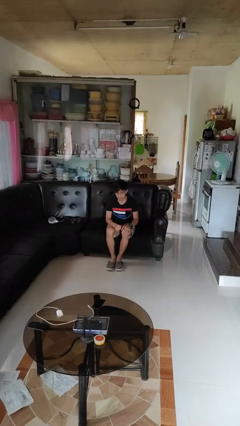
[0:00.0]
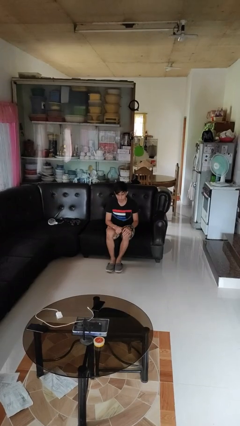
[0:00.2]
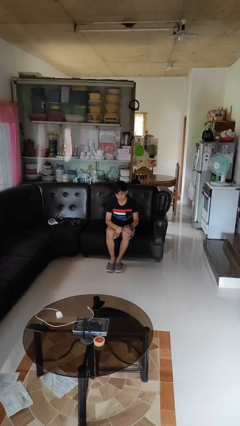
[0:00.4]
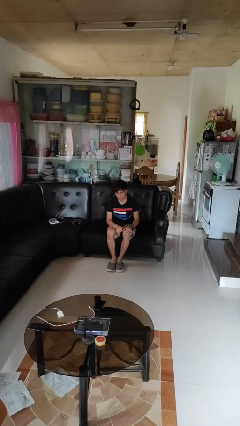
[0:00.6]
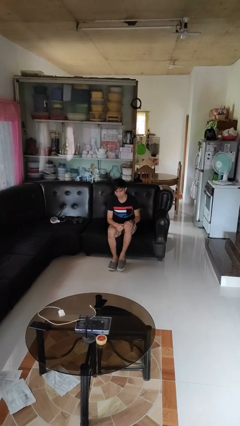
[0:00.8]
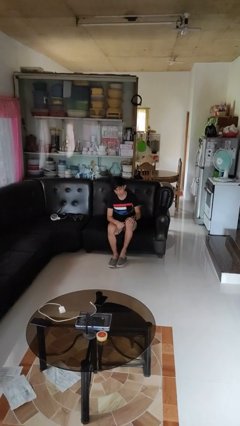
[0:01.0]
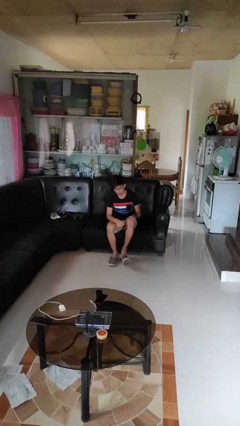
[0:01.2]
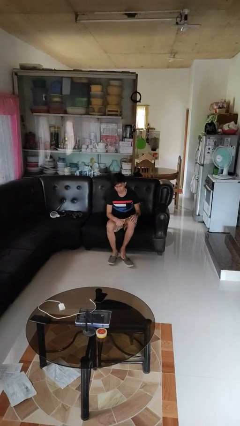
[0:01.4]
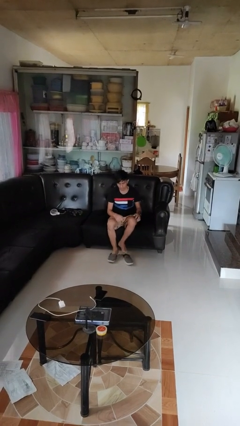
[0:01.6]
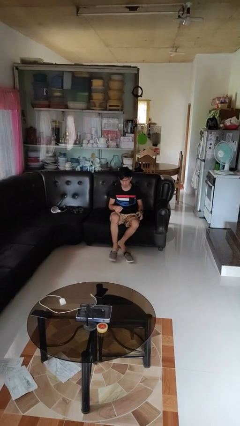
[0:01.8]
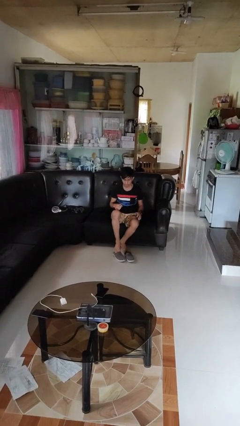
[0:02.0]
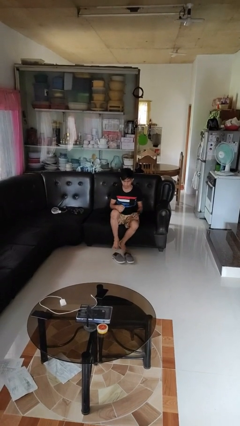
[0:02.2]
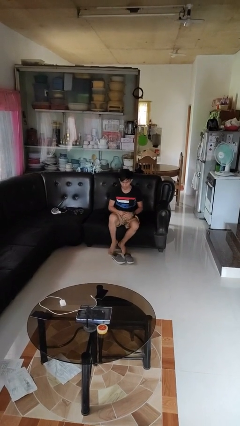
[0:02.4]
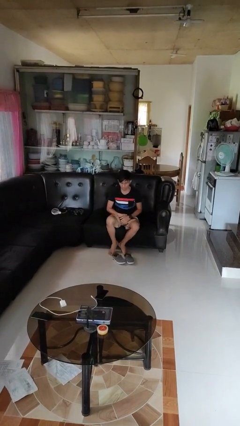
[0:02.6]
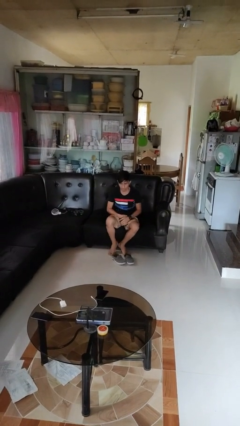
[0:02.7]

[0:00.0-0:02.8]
person takes off shoes

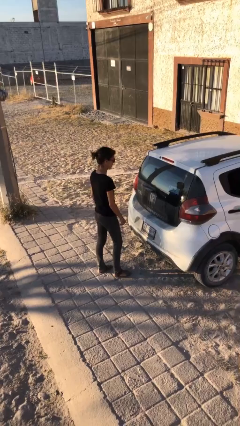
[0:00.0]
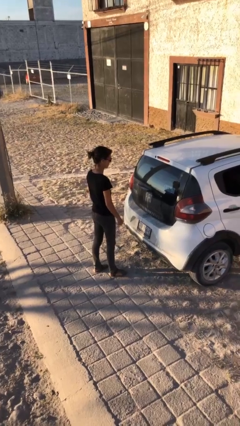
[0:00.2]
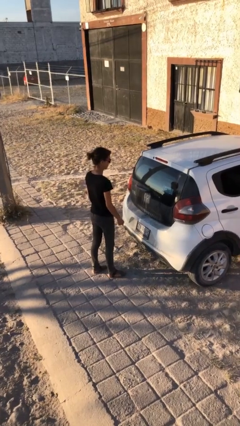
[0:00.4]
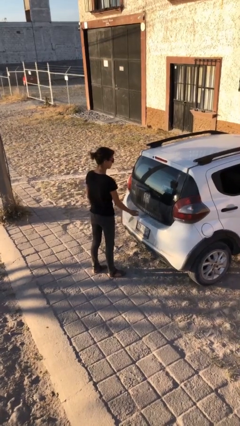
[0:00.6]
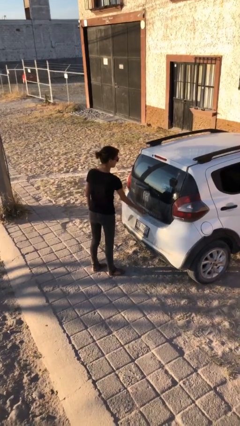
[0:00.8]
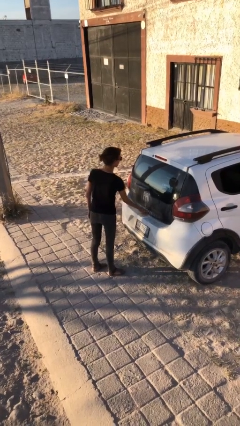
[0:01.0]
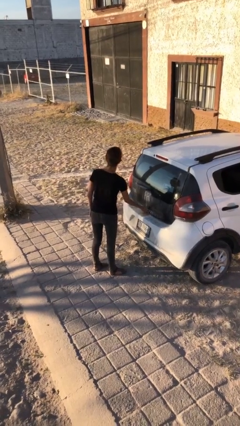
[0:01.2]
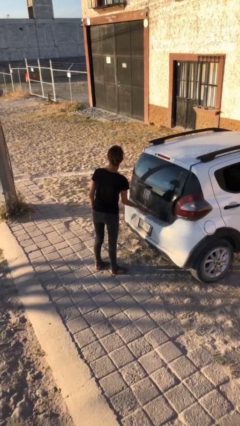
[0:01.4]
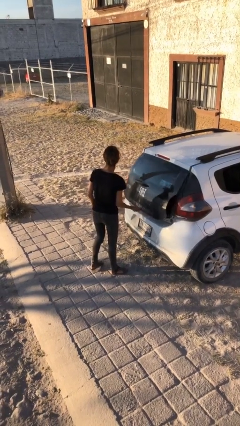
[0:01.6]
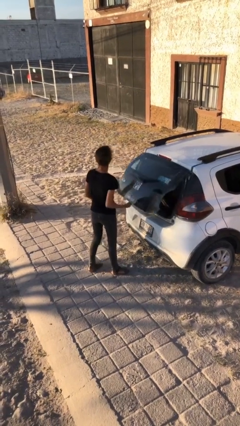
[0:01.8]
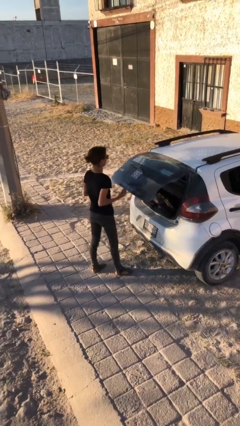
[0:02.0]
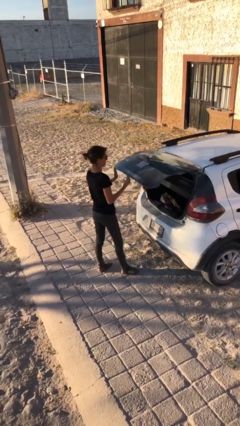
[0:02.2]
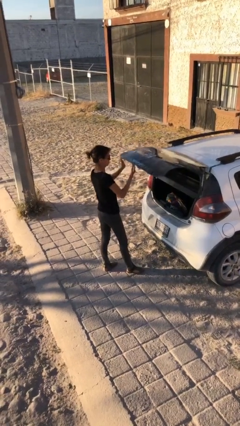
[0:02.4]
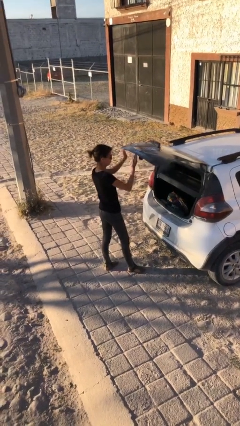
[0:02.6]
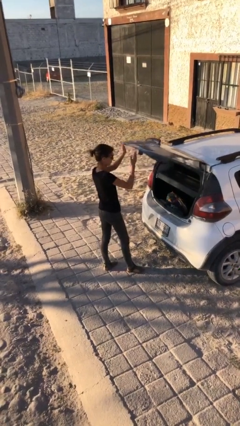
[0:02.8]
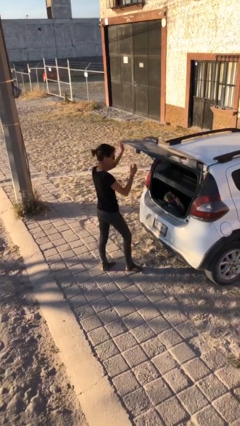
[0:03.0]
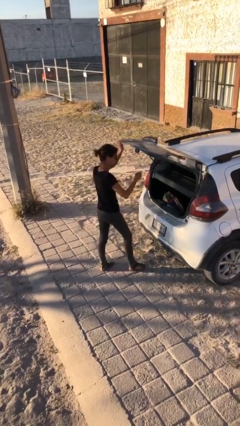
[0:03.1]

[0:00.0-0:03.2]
person opens car trunk

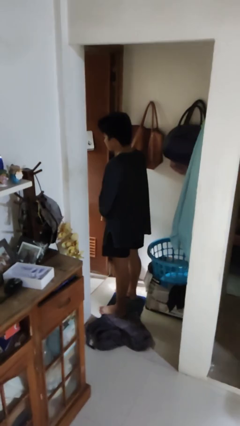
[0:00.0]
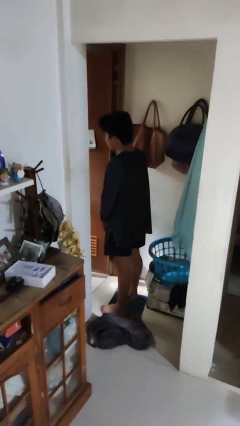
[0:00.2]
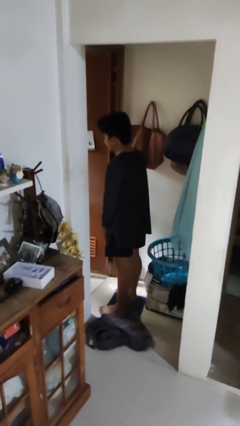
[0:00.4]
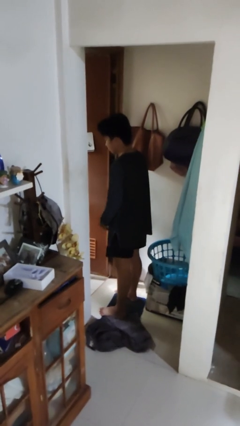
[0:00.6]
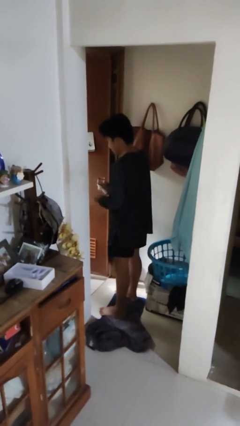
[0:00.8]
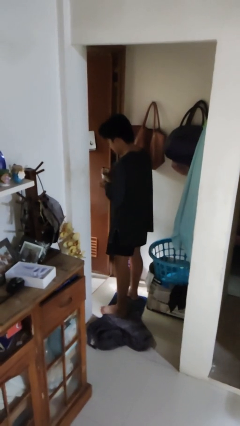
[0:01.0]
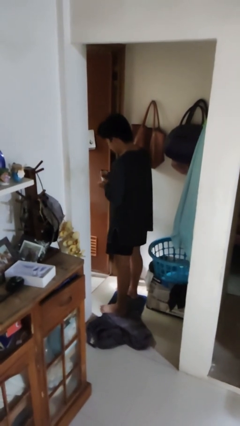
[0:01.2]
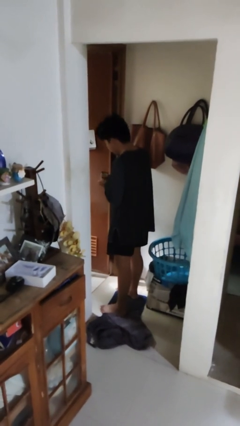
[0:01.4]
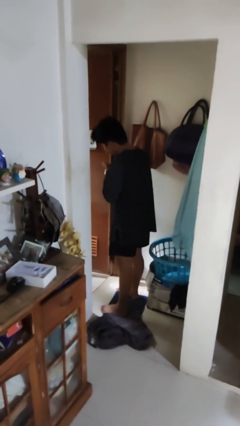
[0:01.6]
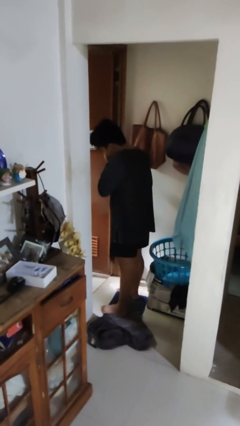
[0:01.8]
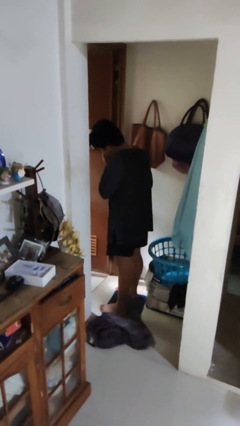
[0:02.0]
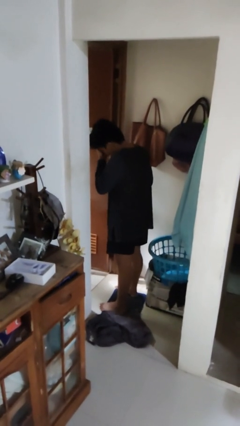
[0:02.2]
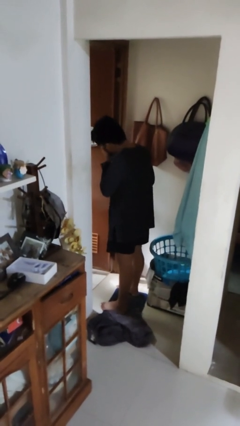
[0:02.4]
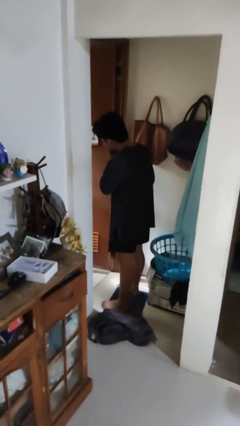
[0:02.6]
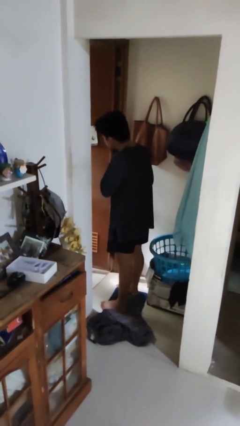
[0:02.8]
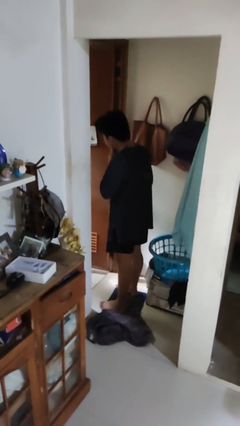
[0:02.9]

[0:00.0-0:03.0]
person applies shaving cream

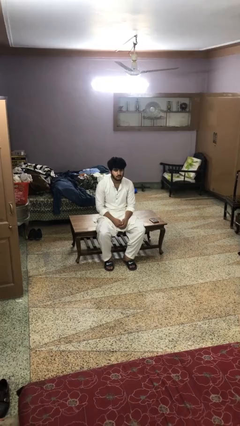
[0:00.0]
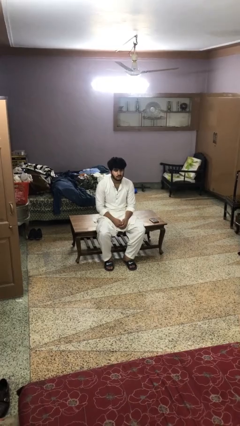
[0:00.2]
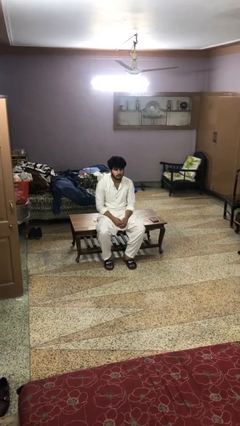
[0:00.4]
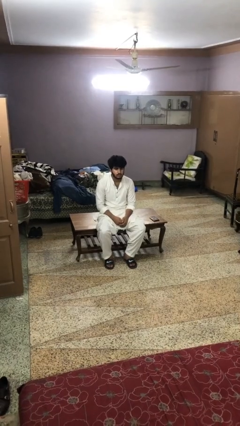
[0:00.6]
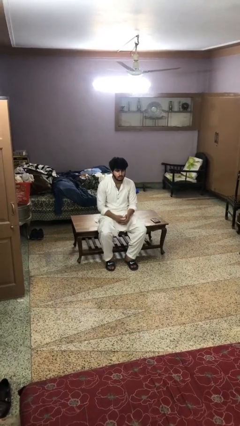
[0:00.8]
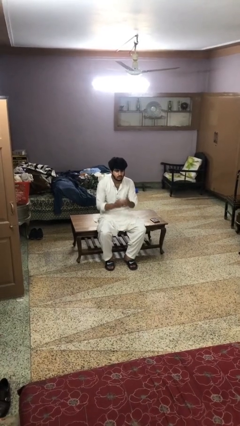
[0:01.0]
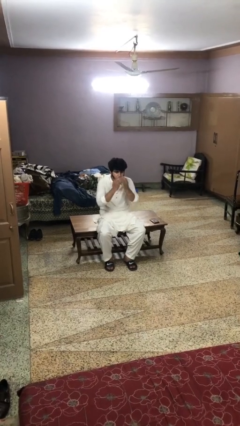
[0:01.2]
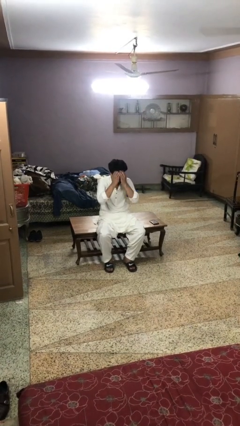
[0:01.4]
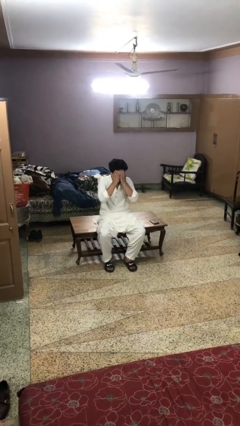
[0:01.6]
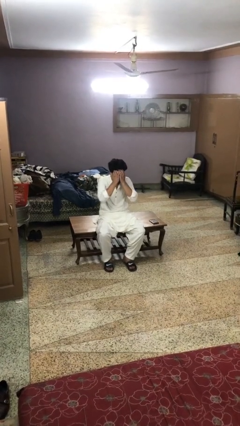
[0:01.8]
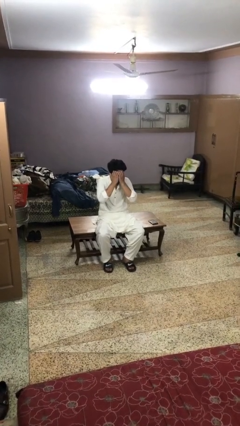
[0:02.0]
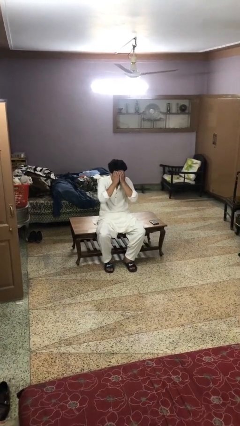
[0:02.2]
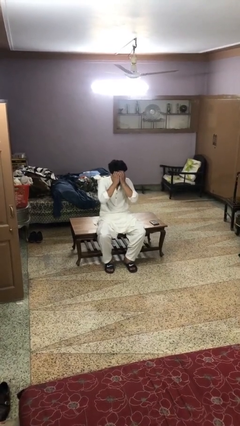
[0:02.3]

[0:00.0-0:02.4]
person covers face with hands

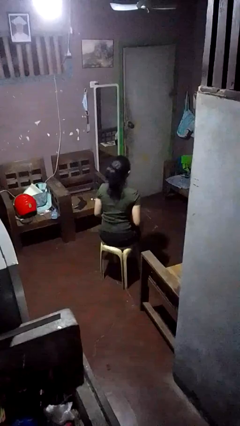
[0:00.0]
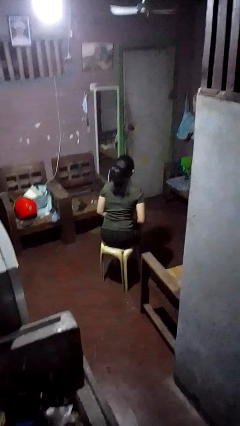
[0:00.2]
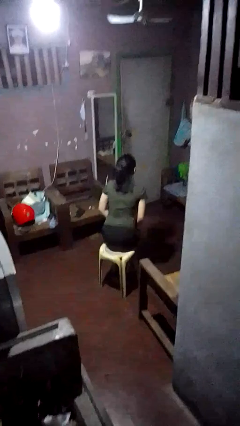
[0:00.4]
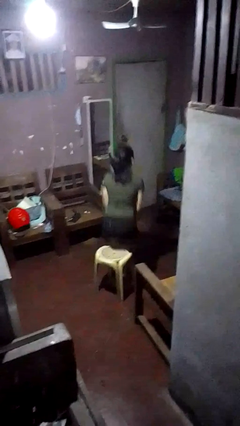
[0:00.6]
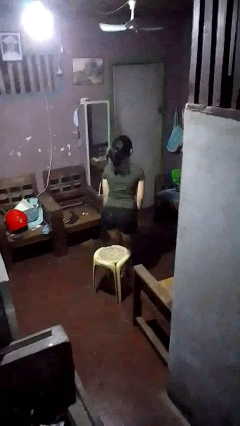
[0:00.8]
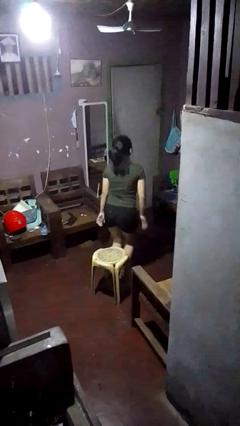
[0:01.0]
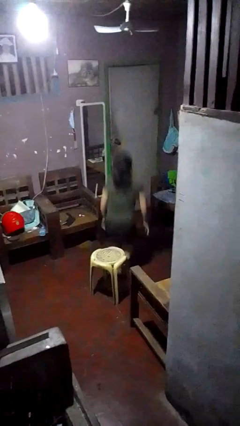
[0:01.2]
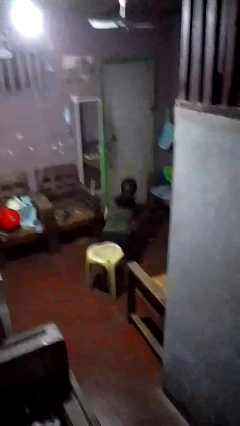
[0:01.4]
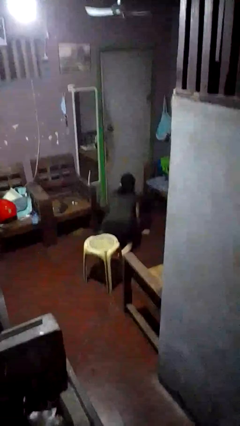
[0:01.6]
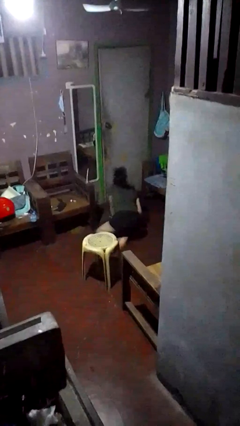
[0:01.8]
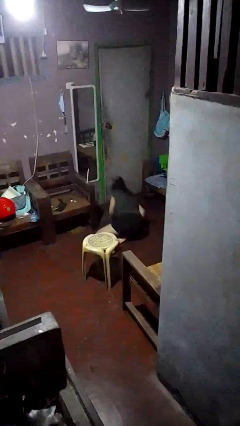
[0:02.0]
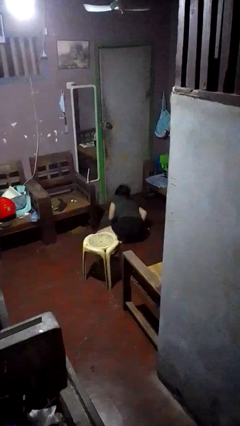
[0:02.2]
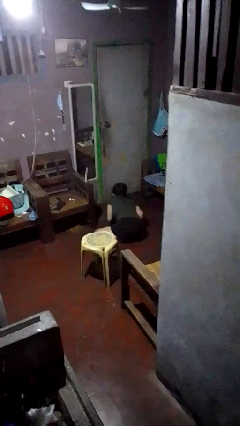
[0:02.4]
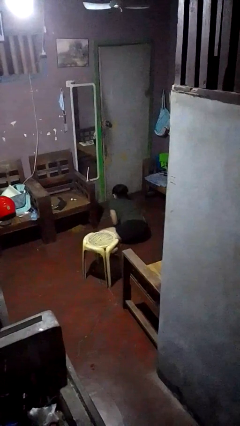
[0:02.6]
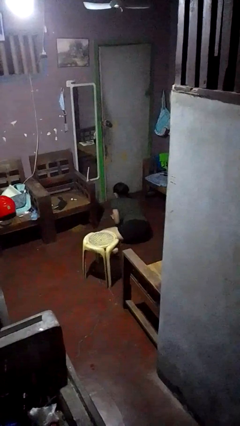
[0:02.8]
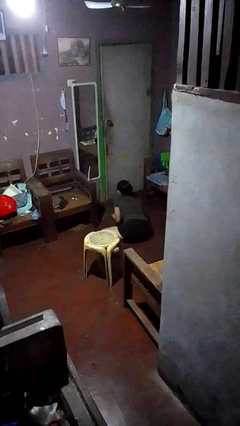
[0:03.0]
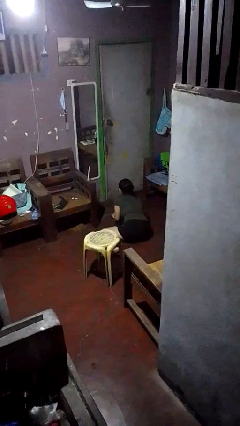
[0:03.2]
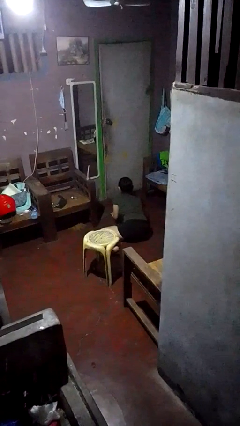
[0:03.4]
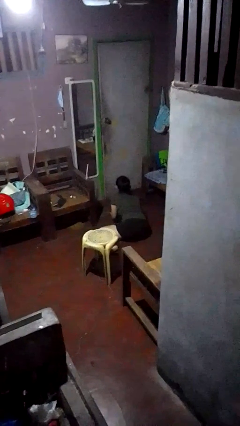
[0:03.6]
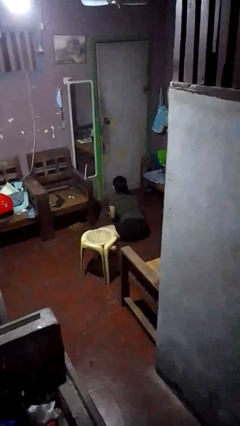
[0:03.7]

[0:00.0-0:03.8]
person falls from chair

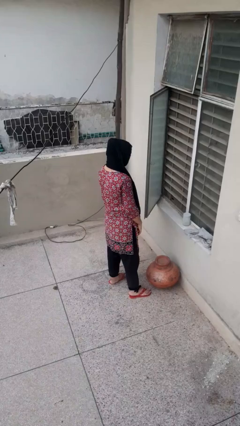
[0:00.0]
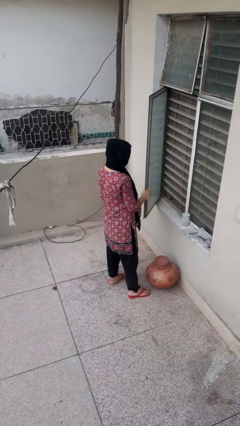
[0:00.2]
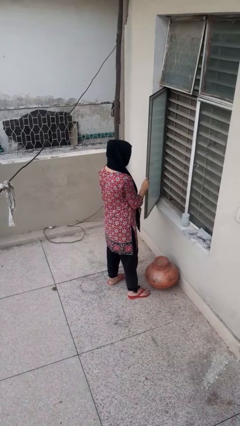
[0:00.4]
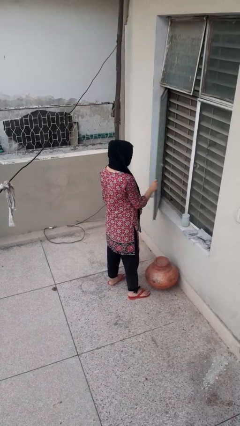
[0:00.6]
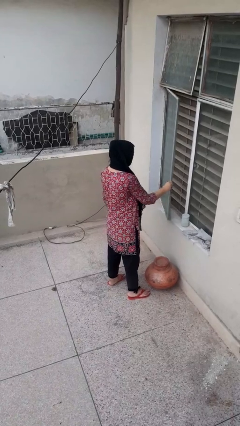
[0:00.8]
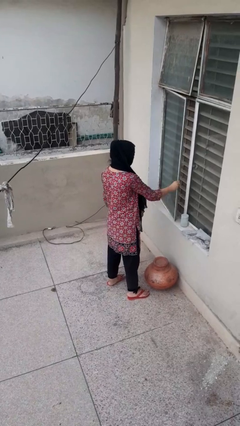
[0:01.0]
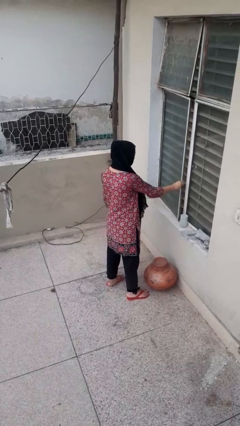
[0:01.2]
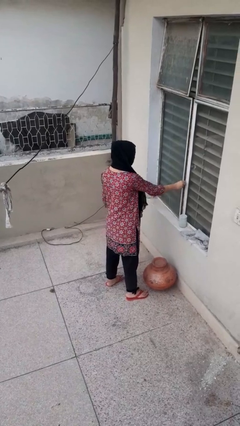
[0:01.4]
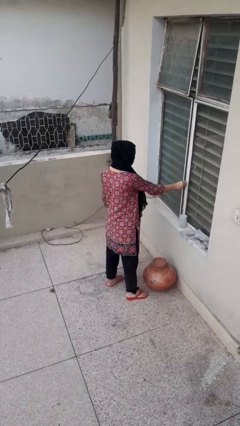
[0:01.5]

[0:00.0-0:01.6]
person closes home window

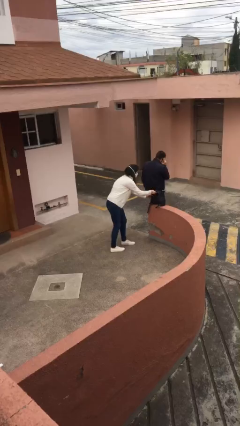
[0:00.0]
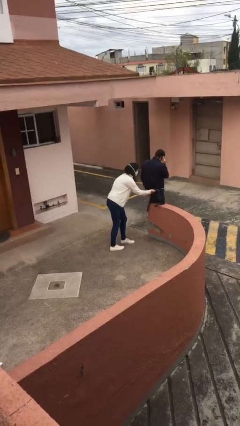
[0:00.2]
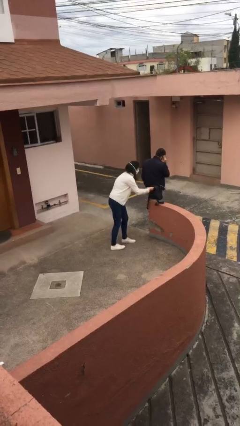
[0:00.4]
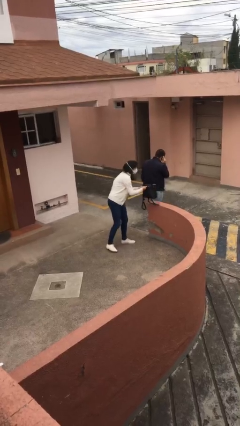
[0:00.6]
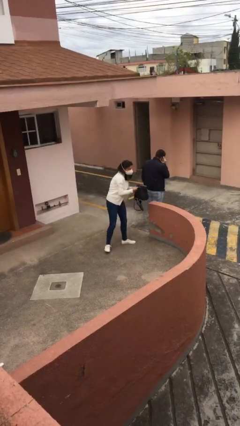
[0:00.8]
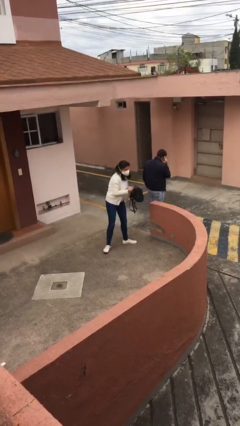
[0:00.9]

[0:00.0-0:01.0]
person steals object from person
